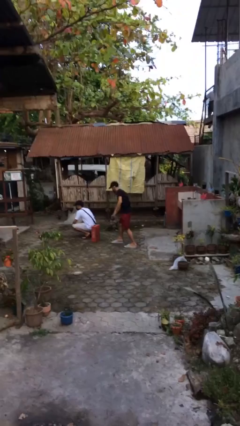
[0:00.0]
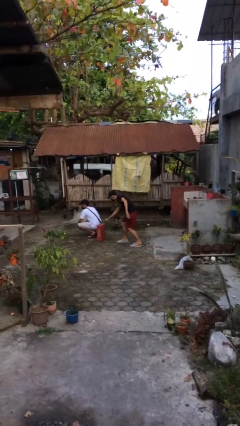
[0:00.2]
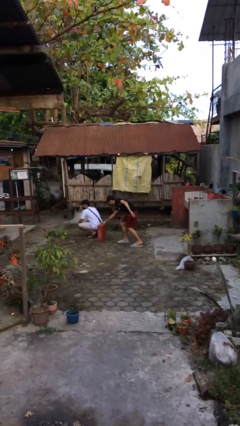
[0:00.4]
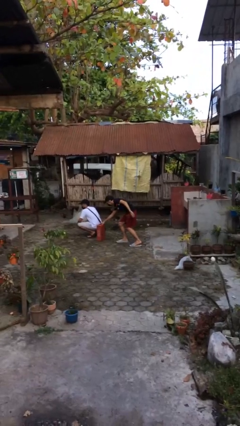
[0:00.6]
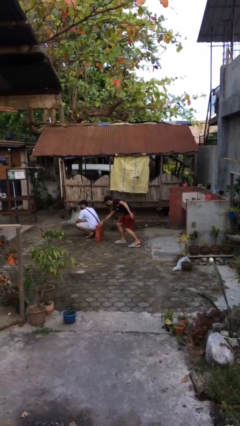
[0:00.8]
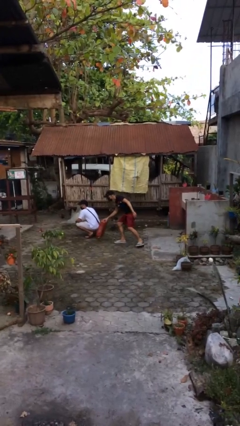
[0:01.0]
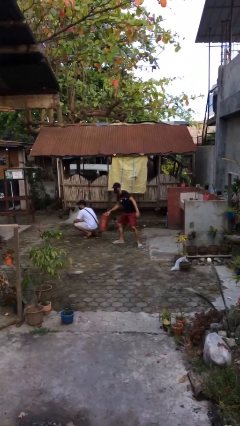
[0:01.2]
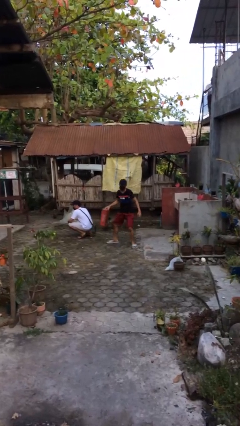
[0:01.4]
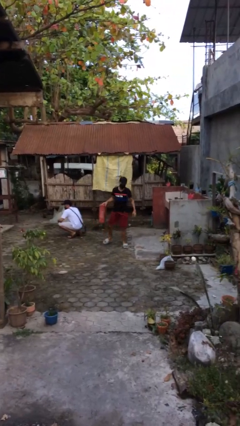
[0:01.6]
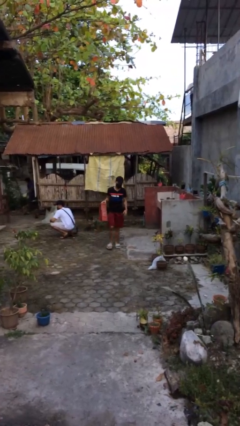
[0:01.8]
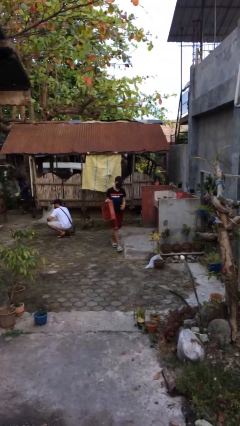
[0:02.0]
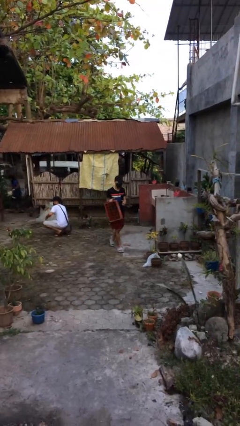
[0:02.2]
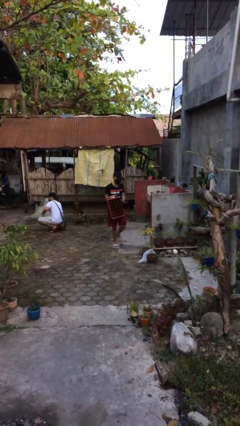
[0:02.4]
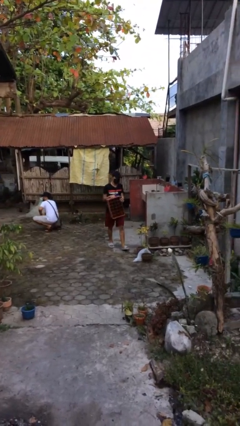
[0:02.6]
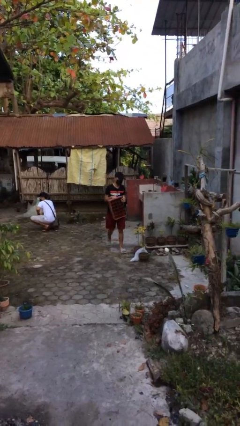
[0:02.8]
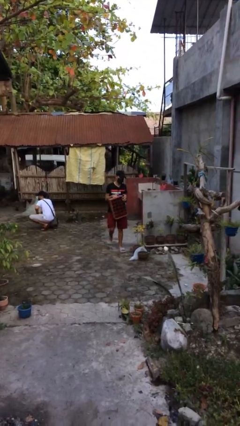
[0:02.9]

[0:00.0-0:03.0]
person steals object from person

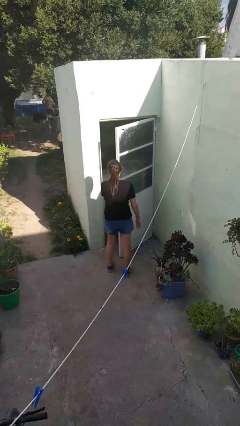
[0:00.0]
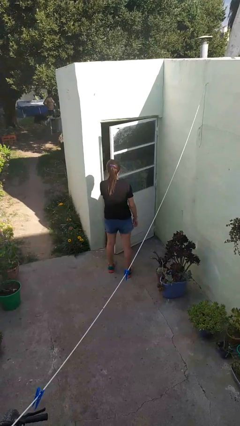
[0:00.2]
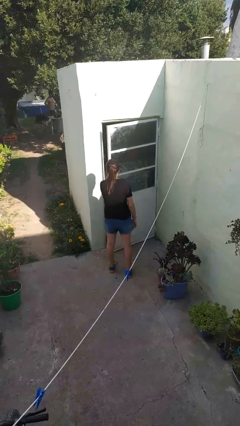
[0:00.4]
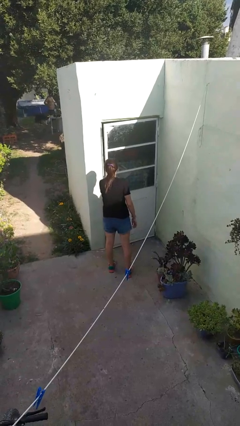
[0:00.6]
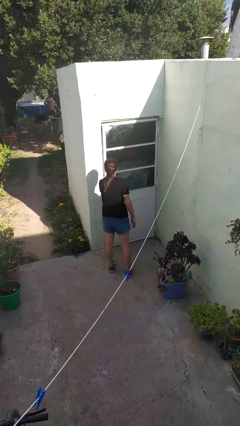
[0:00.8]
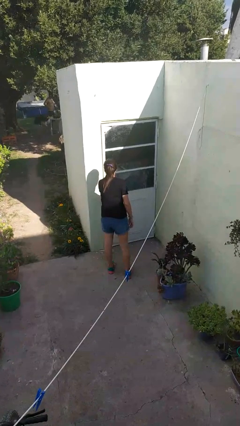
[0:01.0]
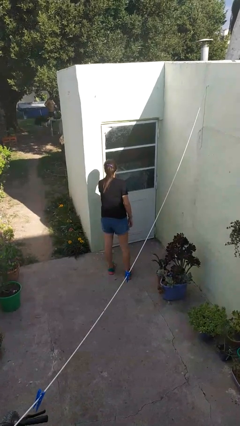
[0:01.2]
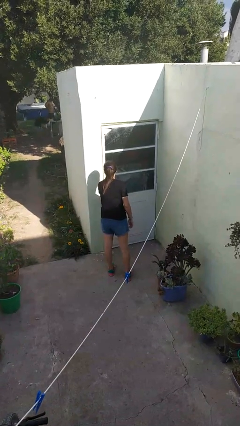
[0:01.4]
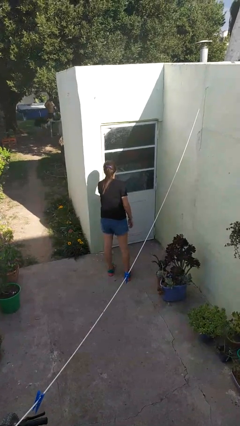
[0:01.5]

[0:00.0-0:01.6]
person closes facility door

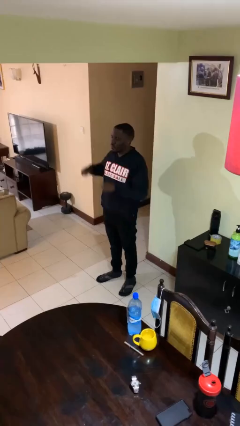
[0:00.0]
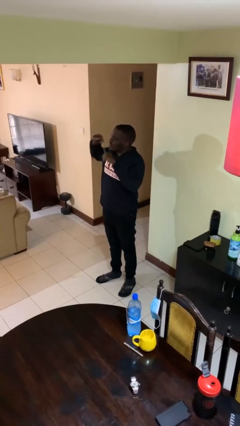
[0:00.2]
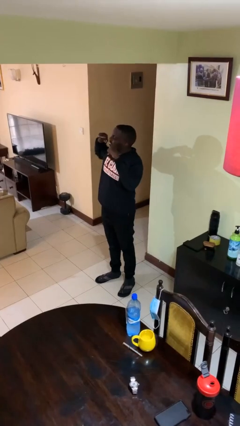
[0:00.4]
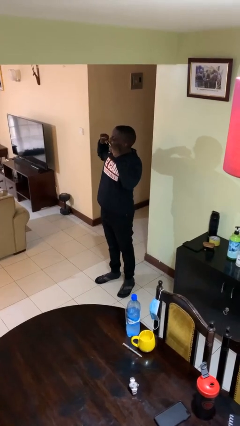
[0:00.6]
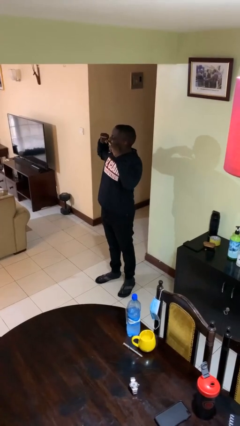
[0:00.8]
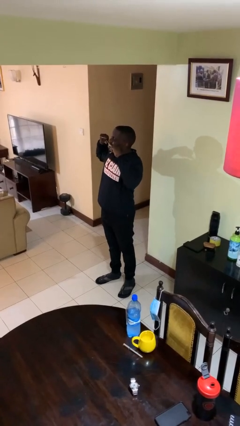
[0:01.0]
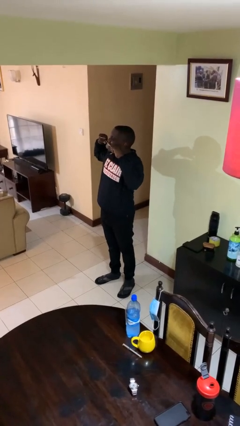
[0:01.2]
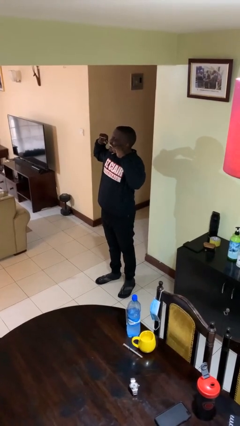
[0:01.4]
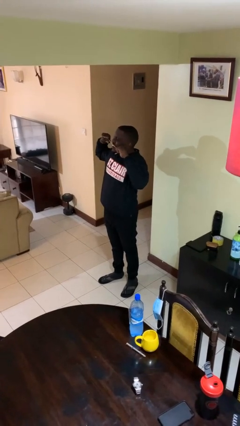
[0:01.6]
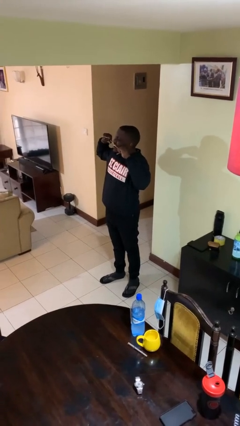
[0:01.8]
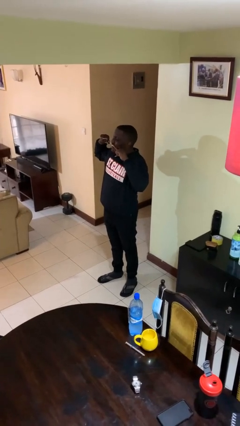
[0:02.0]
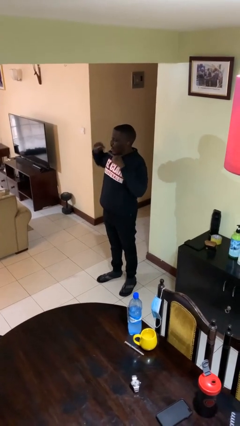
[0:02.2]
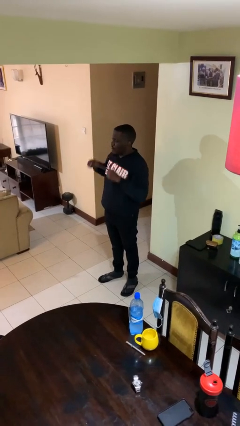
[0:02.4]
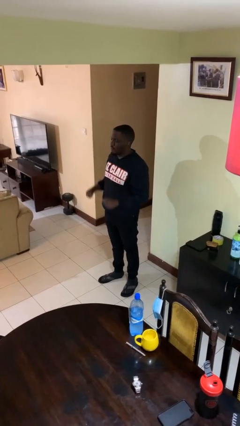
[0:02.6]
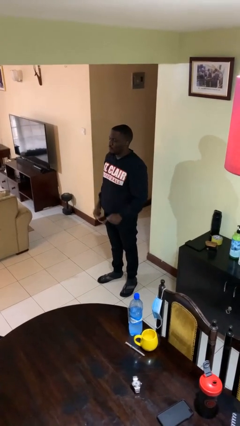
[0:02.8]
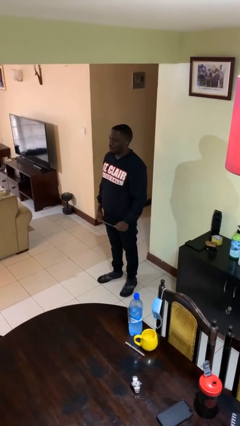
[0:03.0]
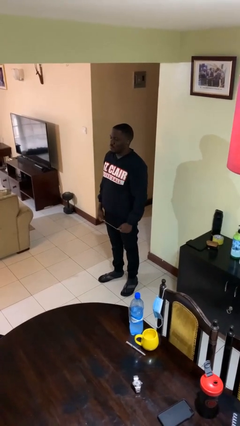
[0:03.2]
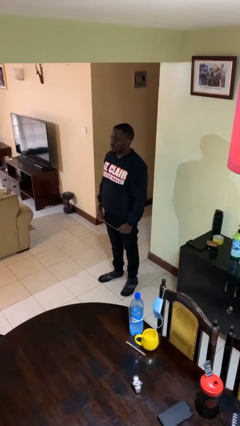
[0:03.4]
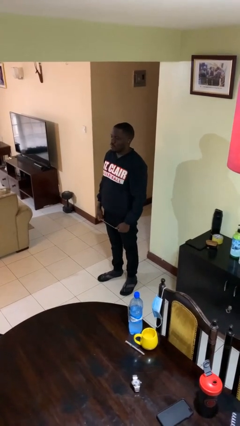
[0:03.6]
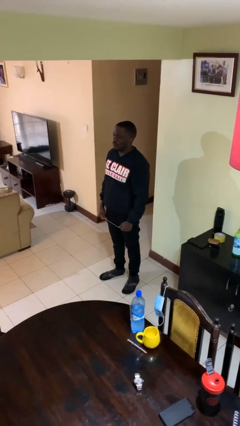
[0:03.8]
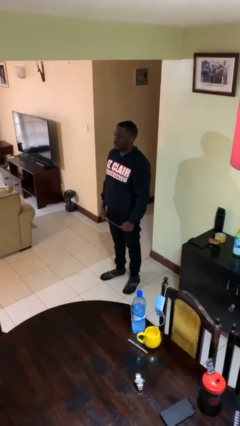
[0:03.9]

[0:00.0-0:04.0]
person flosses

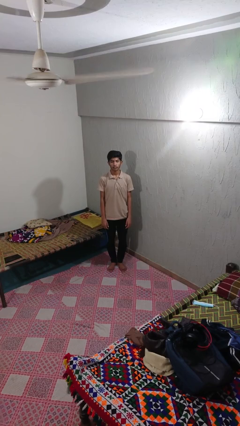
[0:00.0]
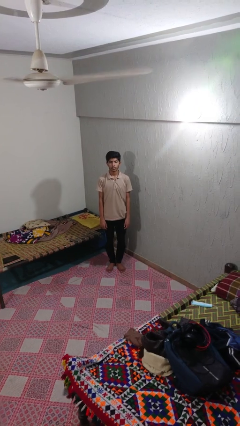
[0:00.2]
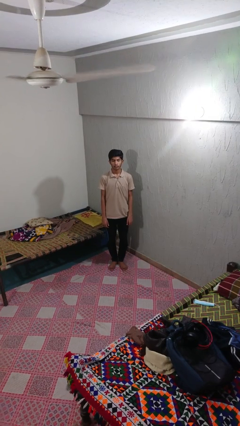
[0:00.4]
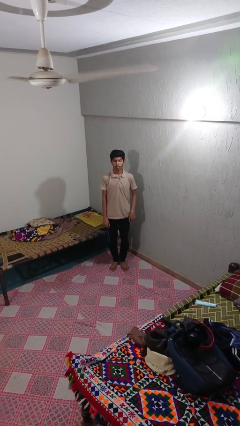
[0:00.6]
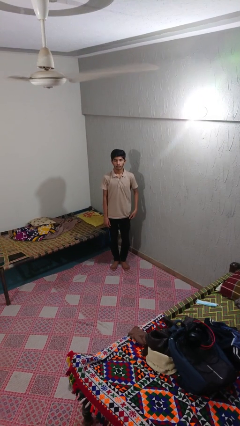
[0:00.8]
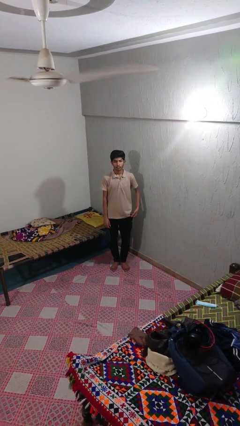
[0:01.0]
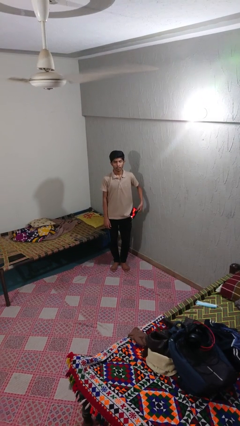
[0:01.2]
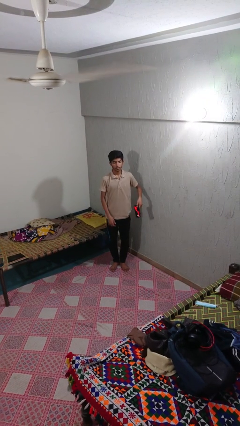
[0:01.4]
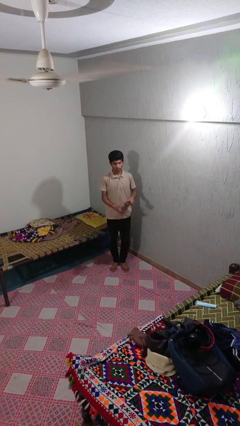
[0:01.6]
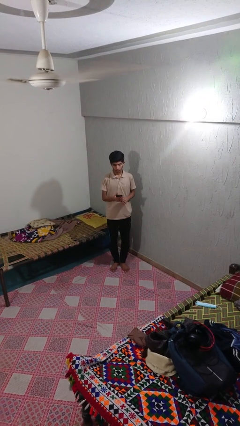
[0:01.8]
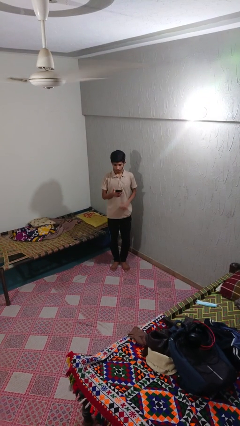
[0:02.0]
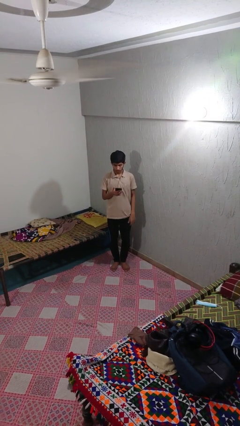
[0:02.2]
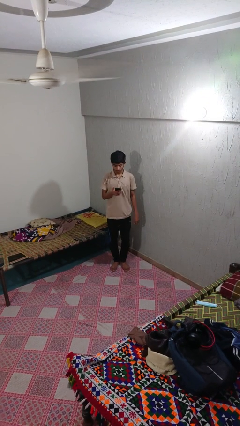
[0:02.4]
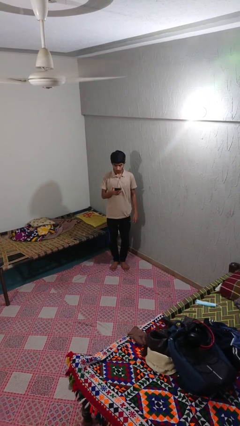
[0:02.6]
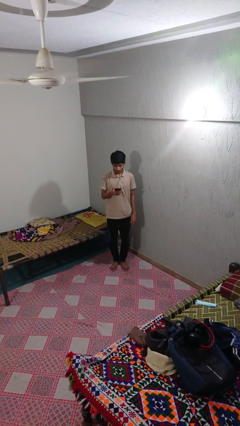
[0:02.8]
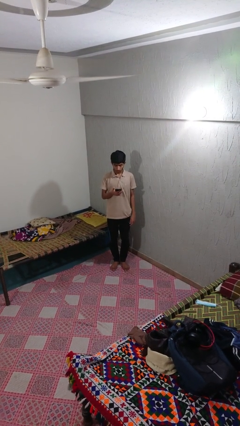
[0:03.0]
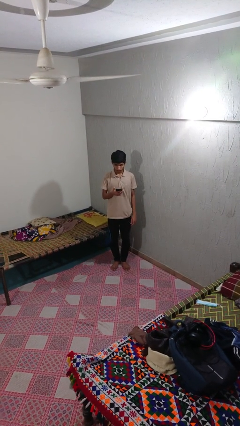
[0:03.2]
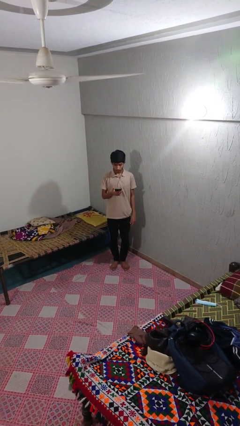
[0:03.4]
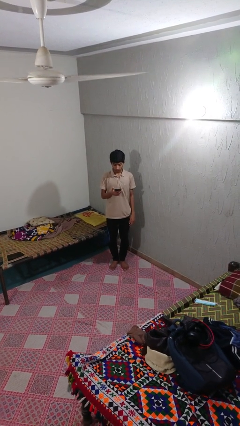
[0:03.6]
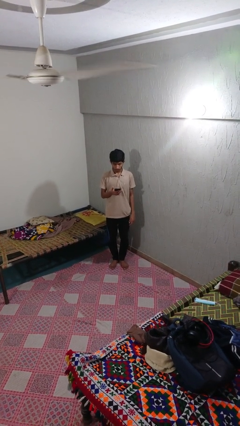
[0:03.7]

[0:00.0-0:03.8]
person takes phone from pocket

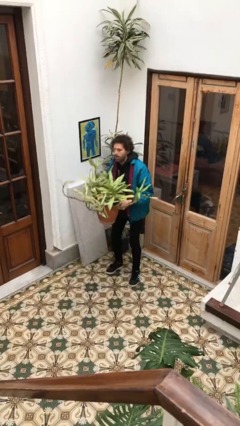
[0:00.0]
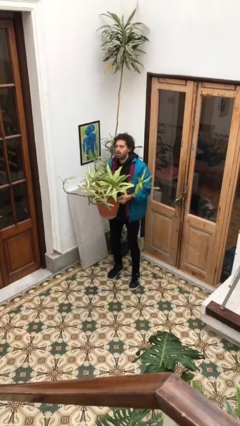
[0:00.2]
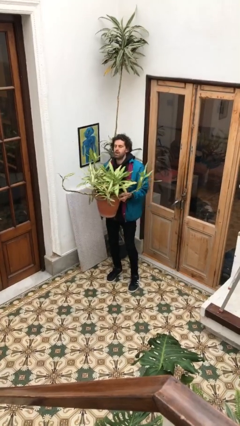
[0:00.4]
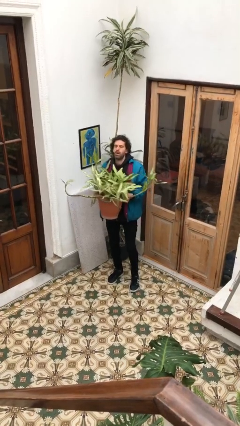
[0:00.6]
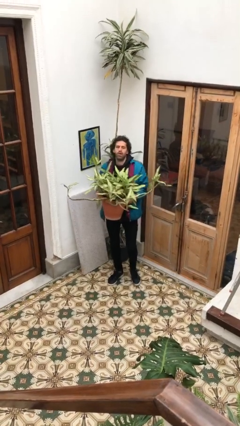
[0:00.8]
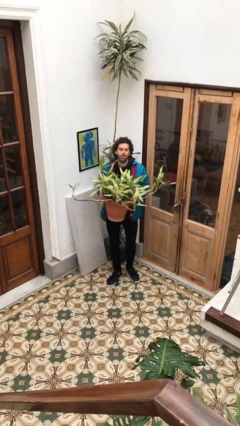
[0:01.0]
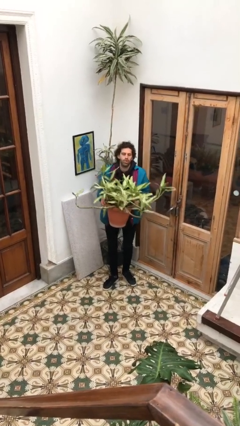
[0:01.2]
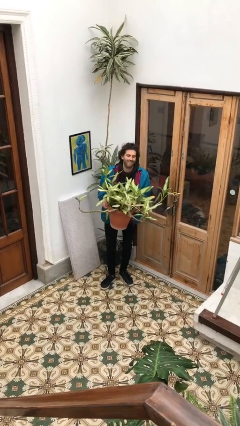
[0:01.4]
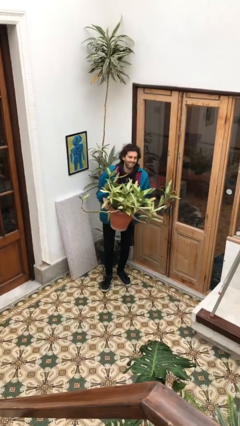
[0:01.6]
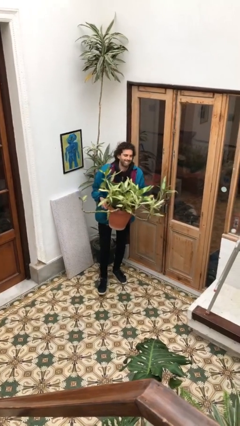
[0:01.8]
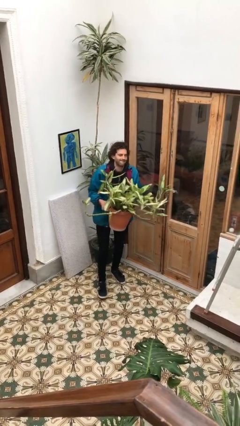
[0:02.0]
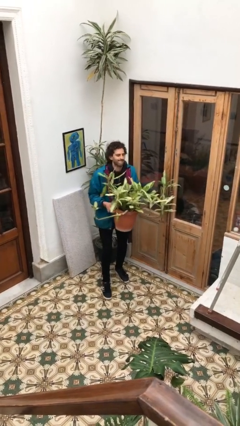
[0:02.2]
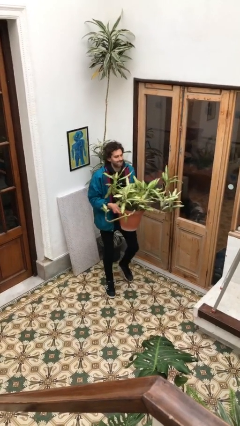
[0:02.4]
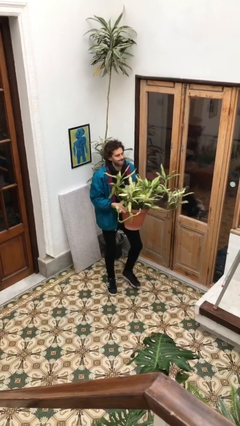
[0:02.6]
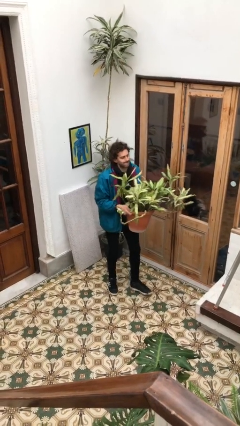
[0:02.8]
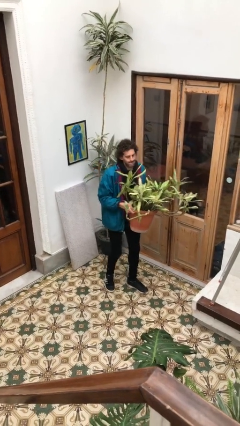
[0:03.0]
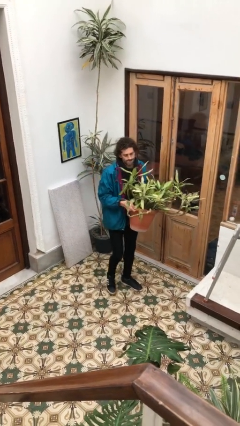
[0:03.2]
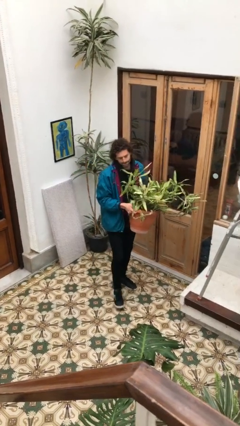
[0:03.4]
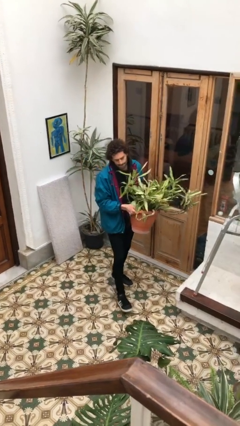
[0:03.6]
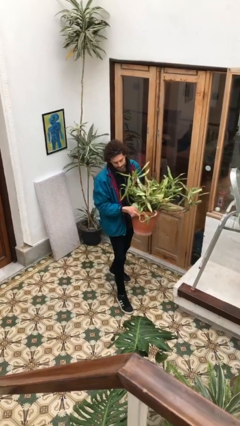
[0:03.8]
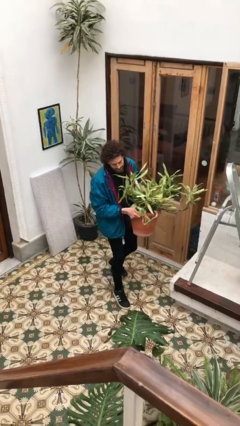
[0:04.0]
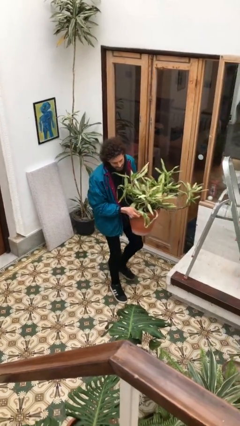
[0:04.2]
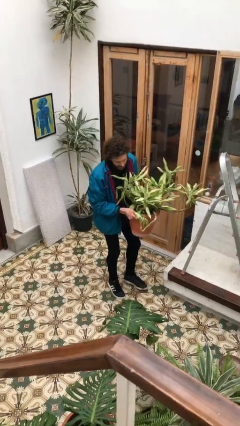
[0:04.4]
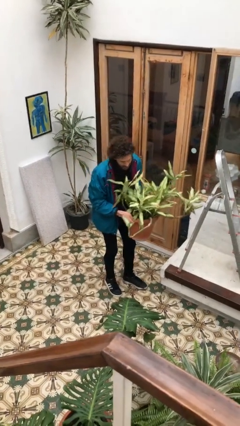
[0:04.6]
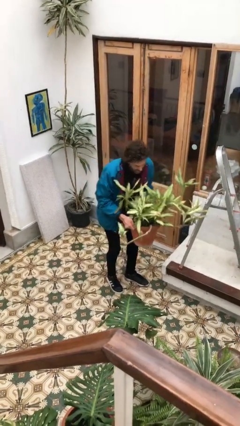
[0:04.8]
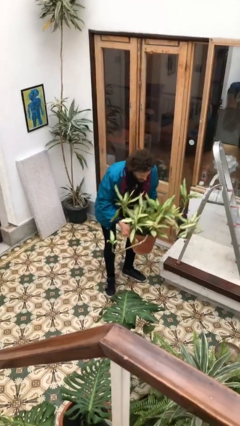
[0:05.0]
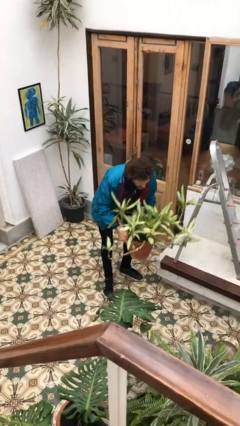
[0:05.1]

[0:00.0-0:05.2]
person carries heavy object
